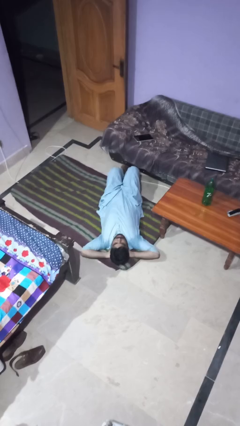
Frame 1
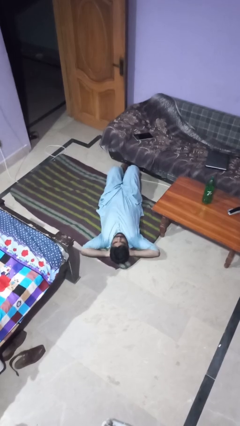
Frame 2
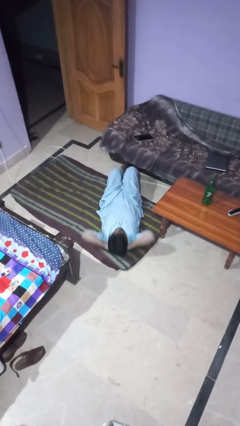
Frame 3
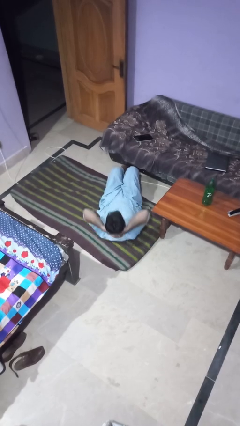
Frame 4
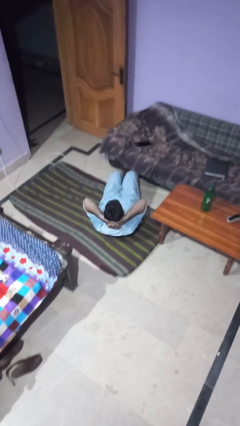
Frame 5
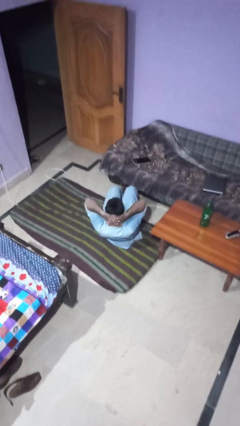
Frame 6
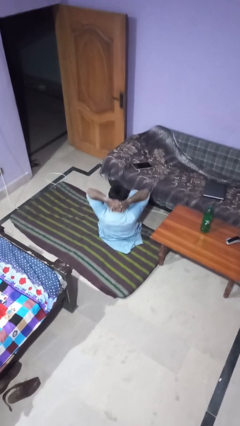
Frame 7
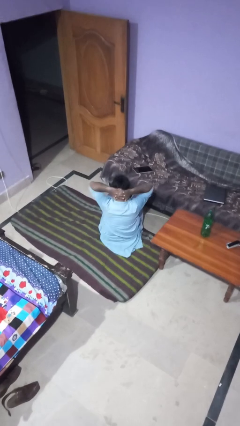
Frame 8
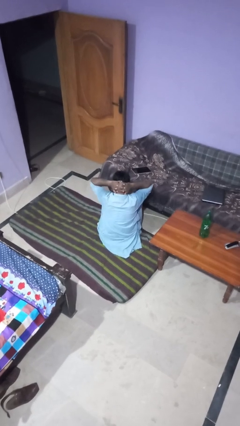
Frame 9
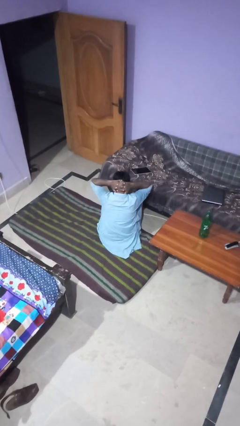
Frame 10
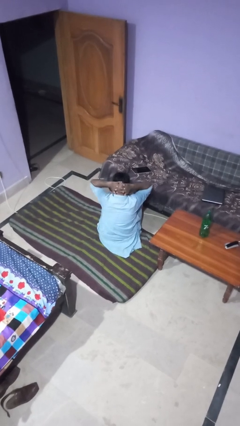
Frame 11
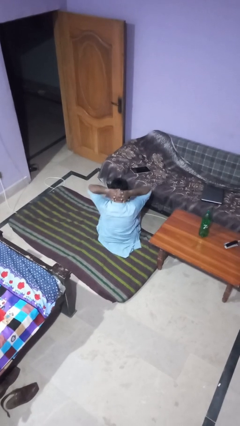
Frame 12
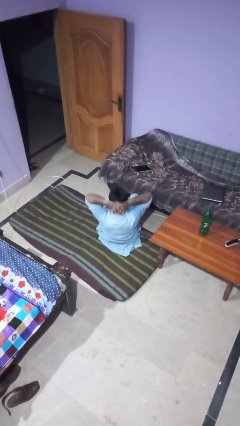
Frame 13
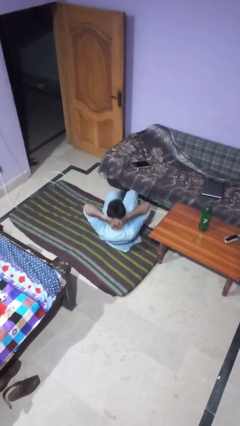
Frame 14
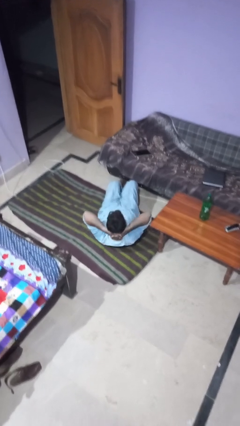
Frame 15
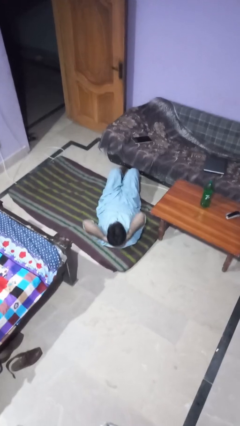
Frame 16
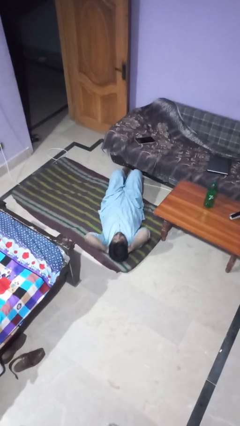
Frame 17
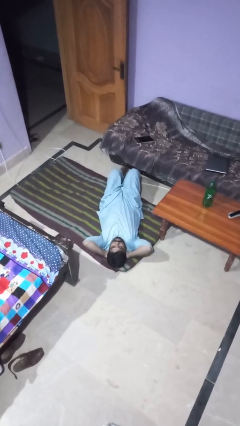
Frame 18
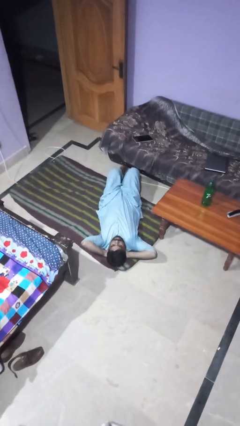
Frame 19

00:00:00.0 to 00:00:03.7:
person exercises with situp

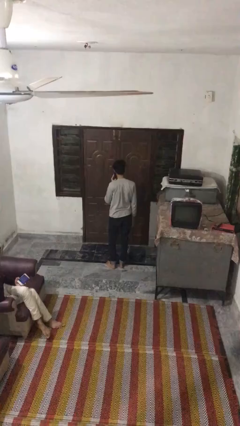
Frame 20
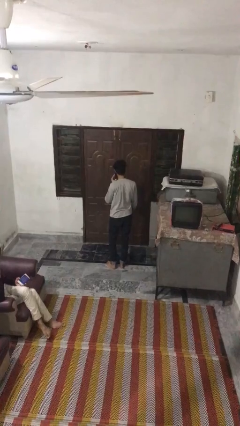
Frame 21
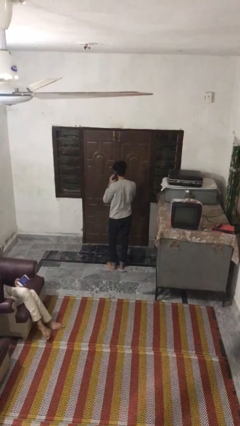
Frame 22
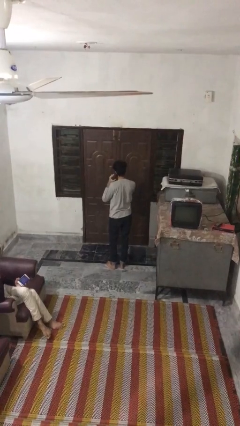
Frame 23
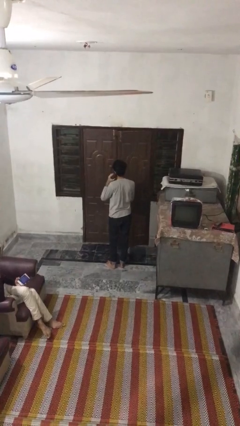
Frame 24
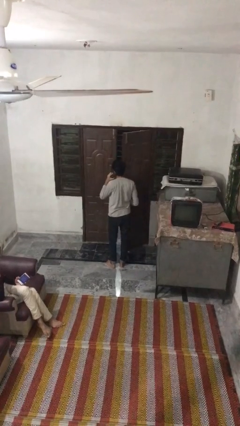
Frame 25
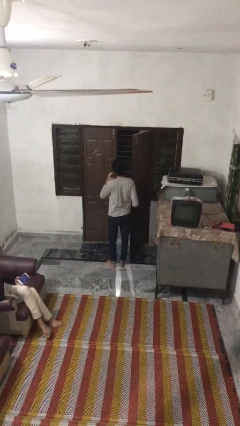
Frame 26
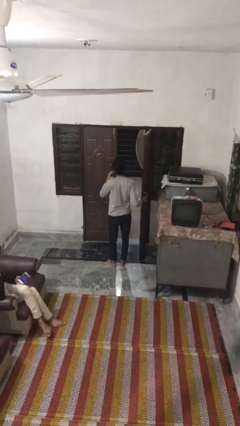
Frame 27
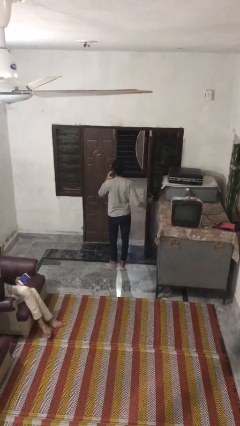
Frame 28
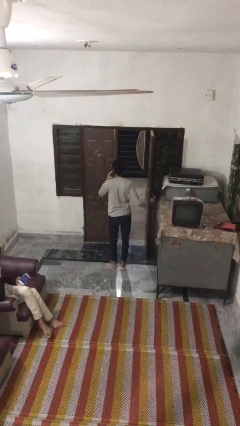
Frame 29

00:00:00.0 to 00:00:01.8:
person opens facility door

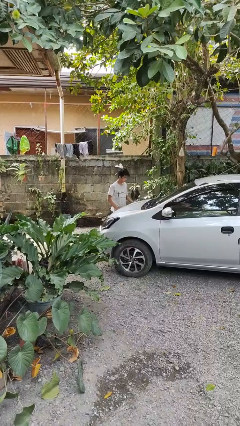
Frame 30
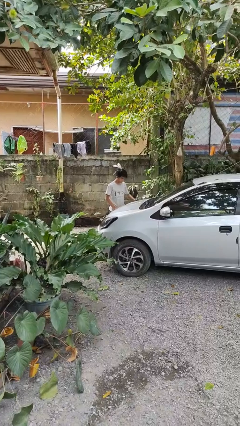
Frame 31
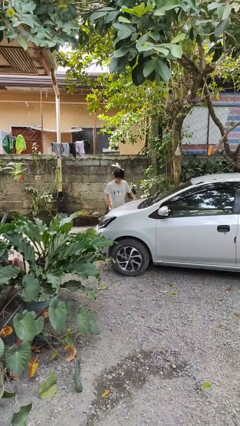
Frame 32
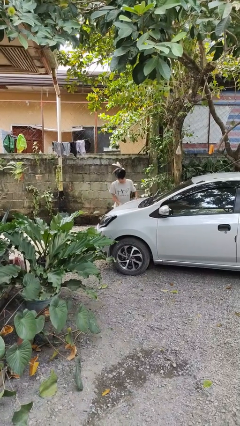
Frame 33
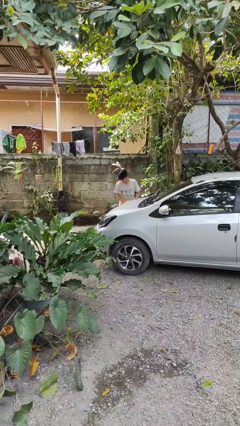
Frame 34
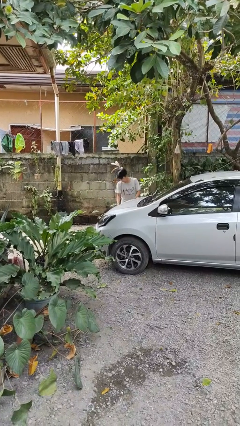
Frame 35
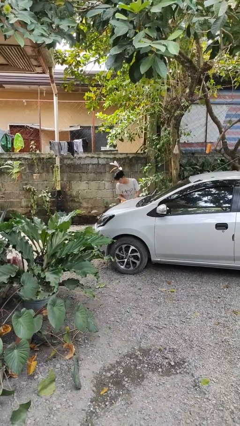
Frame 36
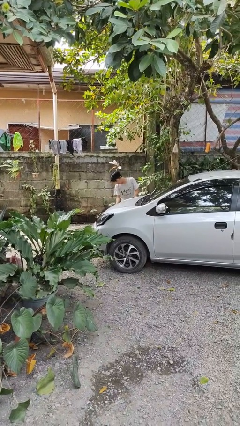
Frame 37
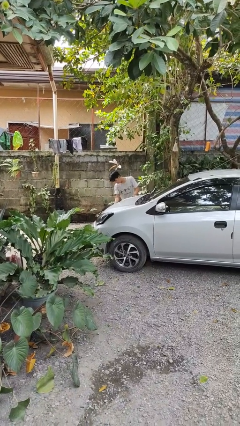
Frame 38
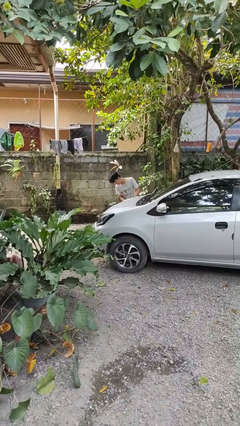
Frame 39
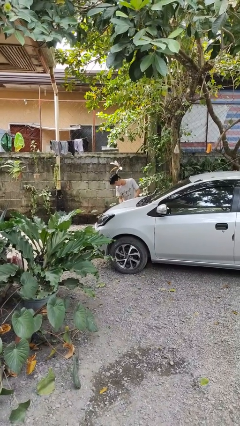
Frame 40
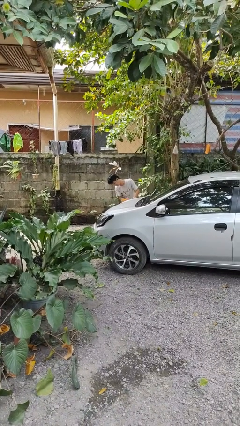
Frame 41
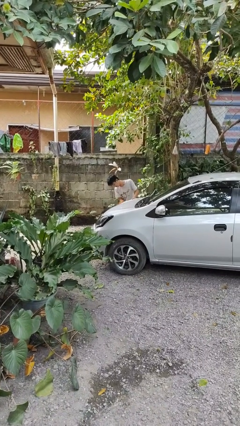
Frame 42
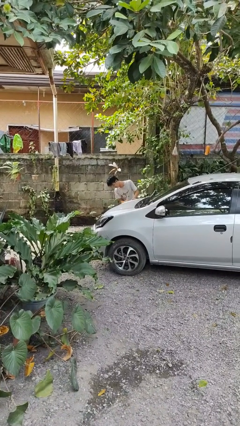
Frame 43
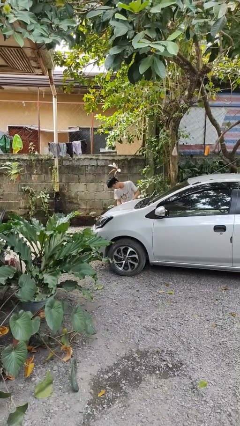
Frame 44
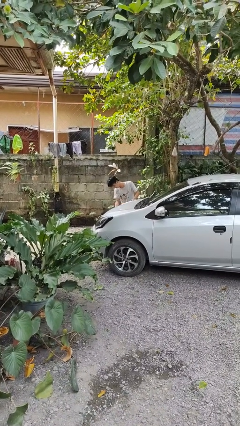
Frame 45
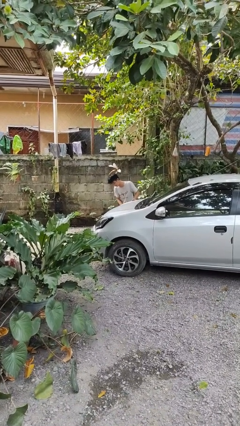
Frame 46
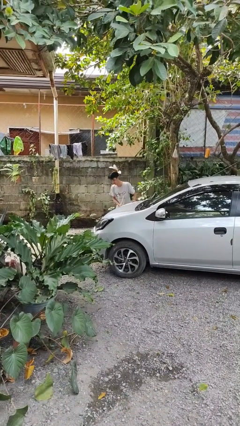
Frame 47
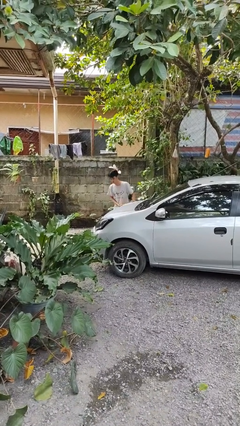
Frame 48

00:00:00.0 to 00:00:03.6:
person polishes car with rag

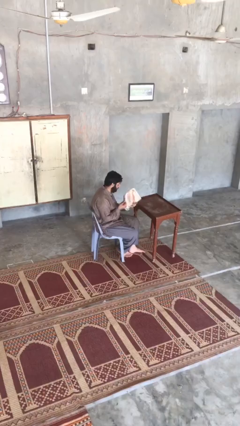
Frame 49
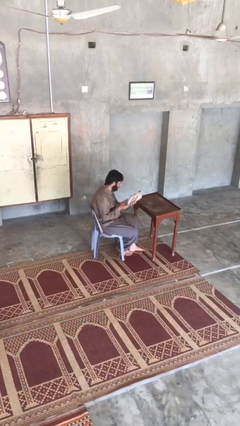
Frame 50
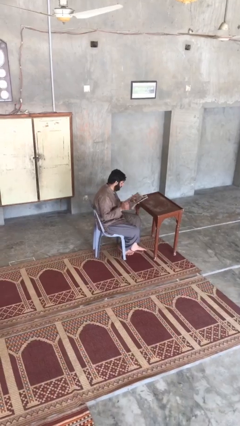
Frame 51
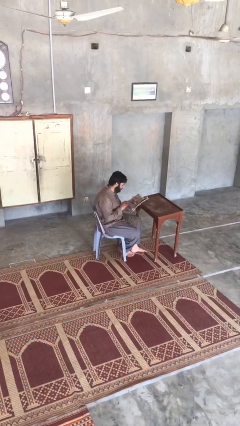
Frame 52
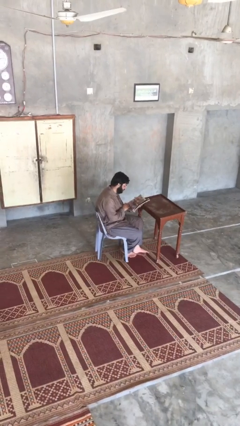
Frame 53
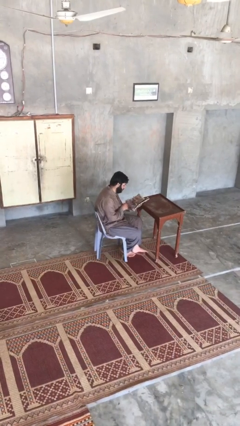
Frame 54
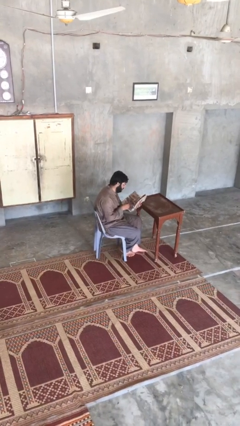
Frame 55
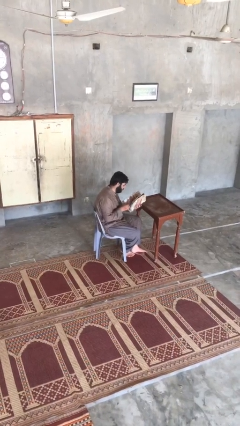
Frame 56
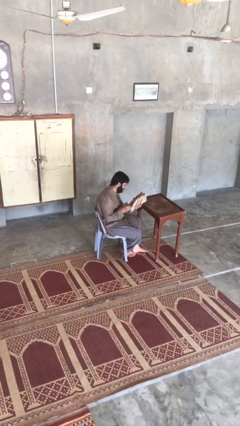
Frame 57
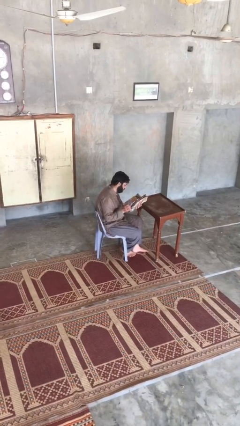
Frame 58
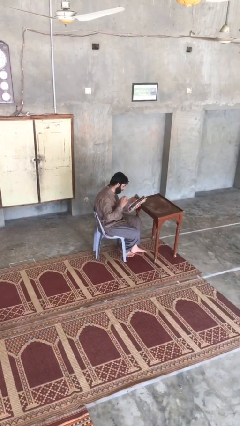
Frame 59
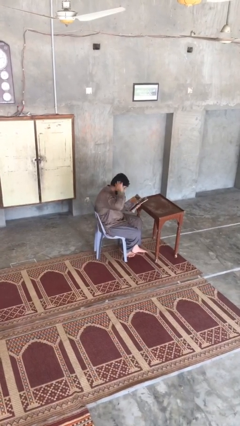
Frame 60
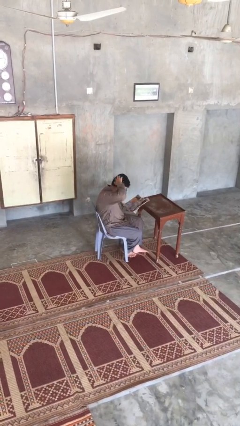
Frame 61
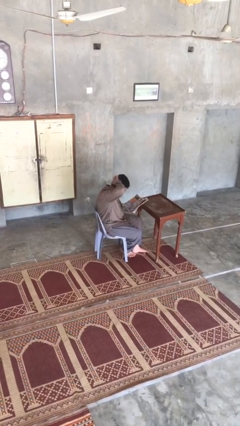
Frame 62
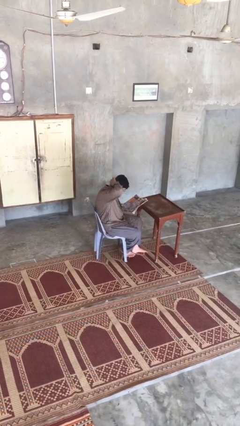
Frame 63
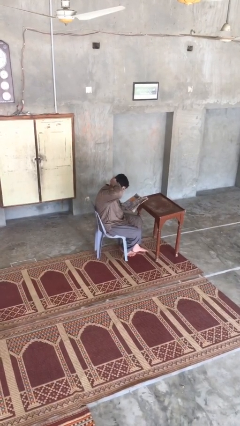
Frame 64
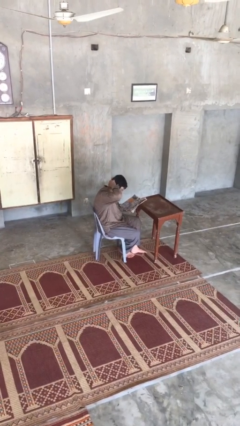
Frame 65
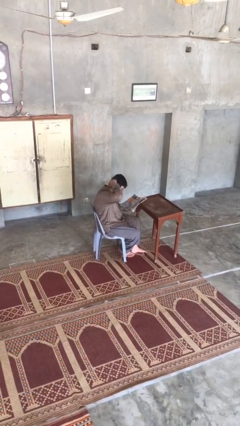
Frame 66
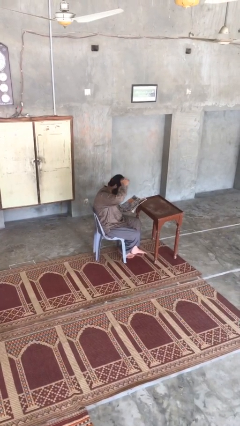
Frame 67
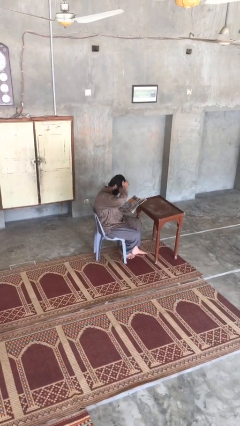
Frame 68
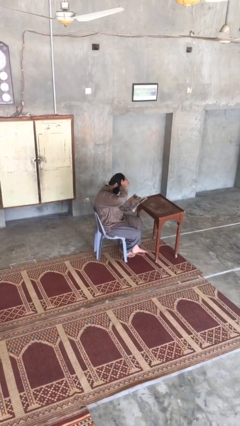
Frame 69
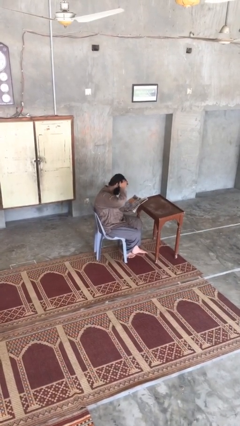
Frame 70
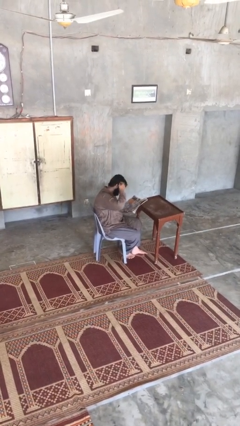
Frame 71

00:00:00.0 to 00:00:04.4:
person reads document

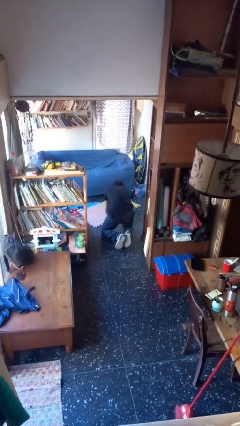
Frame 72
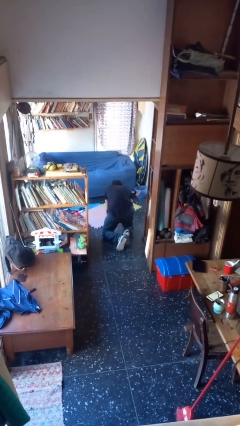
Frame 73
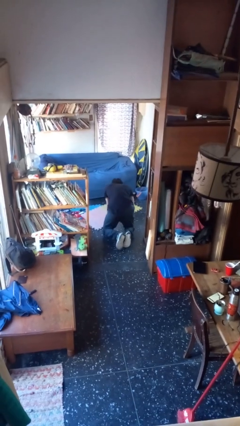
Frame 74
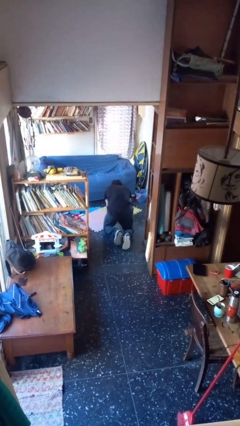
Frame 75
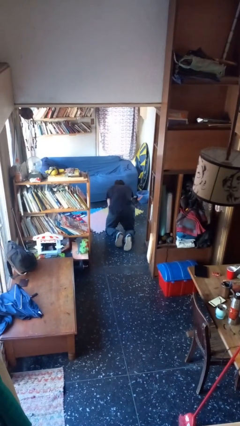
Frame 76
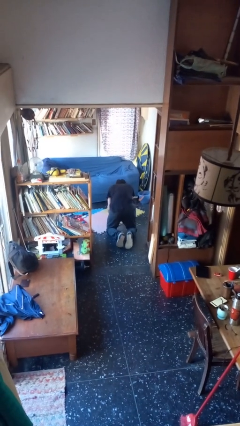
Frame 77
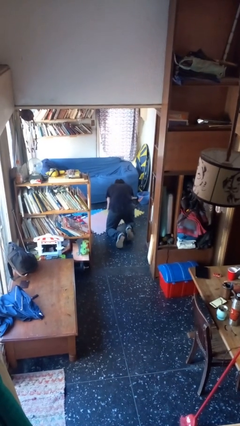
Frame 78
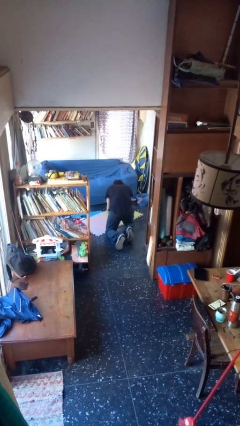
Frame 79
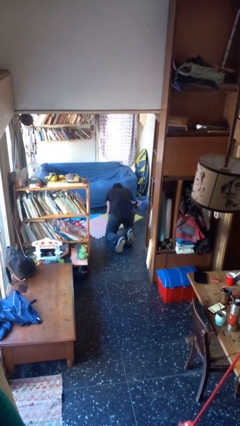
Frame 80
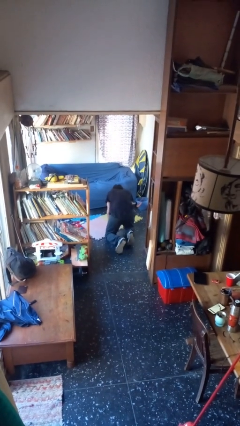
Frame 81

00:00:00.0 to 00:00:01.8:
person crawls

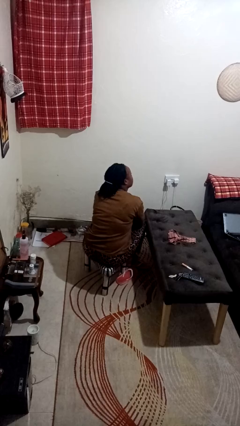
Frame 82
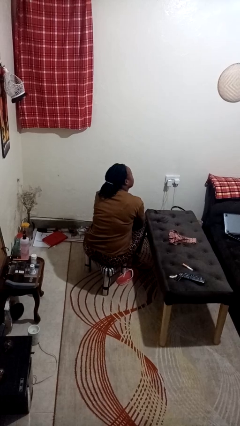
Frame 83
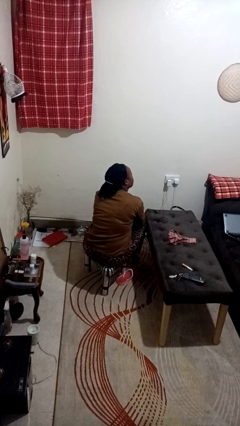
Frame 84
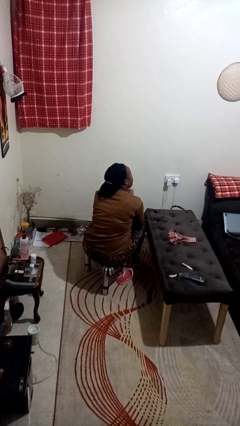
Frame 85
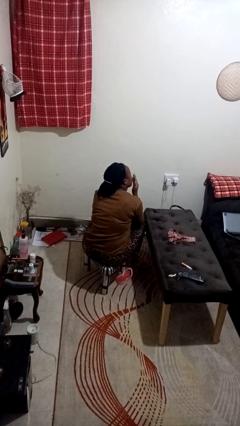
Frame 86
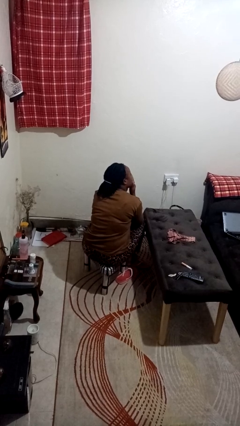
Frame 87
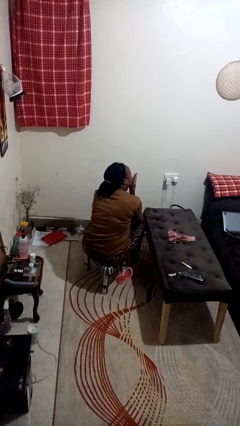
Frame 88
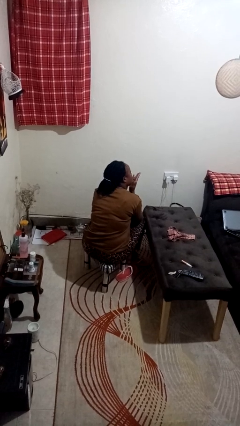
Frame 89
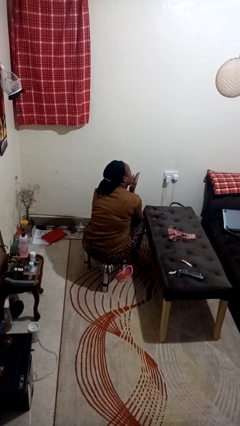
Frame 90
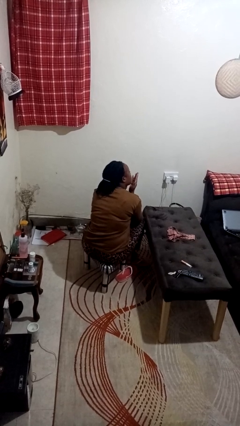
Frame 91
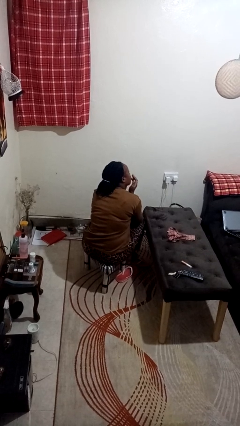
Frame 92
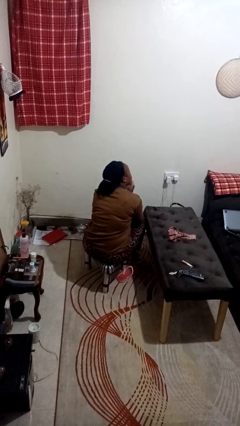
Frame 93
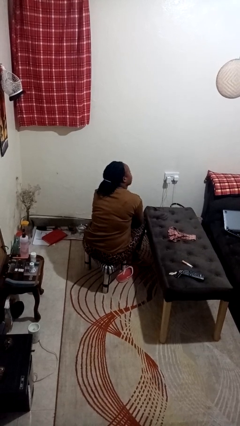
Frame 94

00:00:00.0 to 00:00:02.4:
person gestures blow kiss
